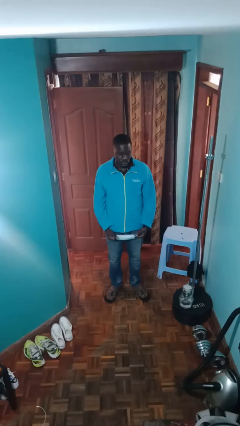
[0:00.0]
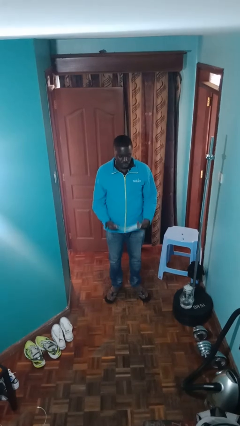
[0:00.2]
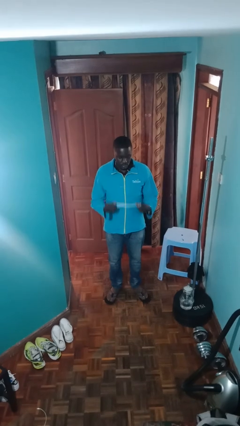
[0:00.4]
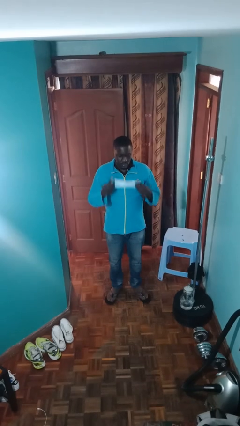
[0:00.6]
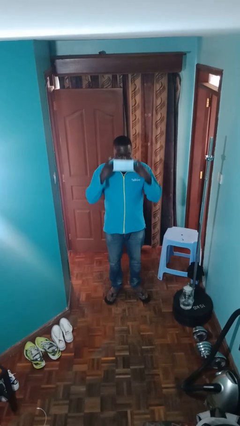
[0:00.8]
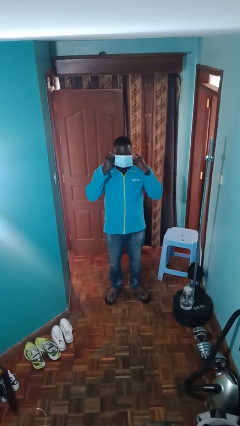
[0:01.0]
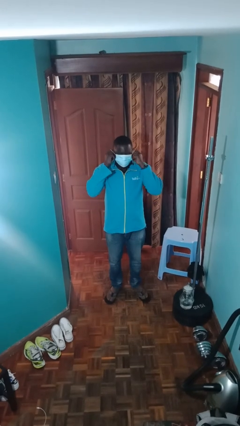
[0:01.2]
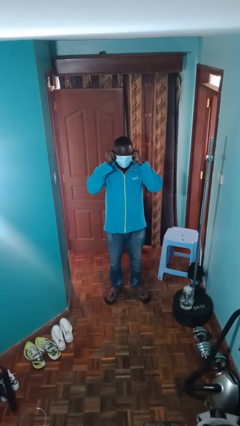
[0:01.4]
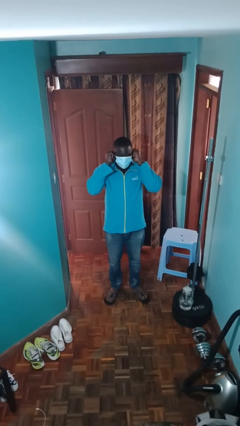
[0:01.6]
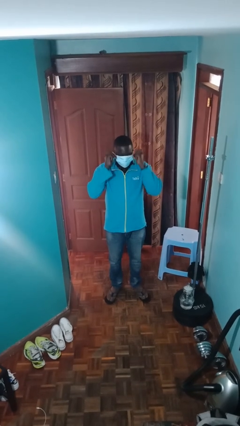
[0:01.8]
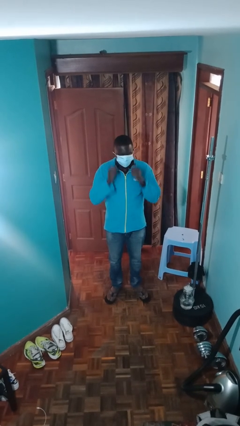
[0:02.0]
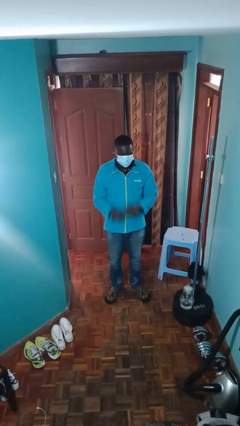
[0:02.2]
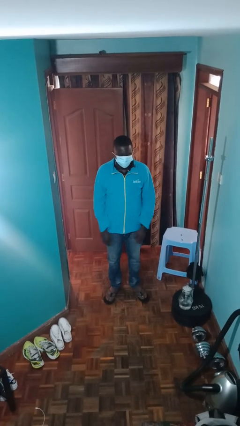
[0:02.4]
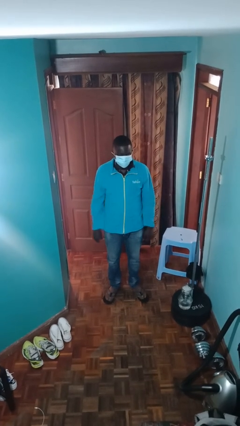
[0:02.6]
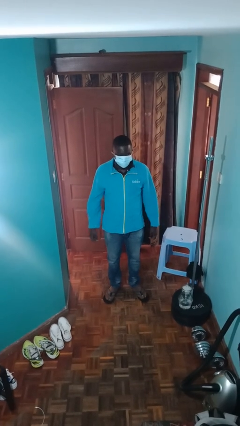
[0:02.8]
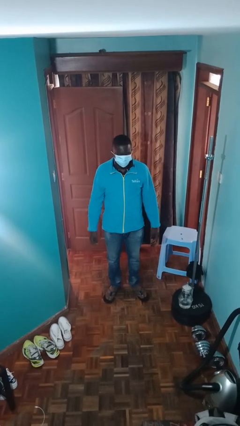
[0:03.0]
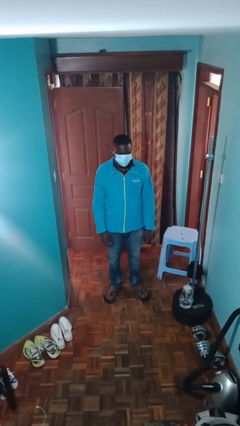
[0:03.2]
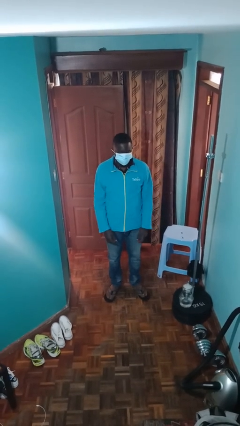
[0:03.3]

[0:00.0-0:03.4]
person puts on facemask

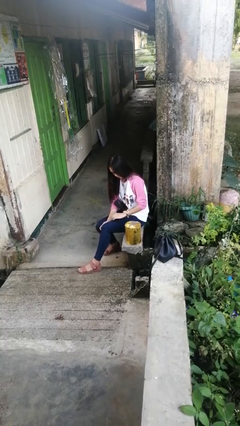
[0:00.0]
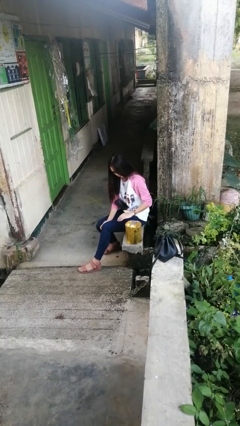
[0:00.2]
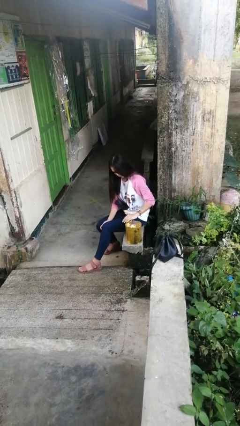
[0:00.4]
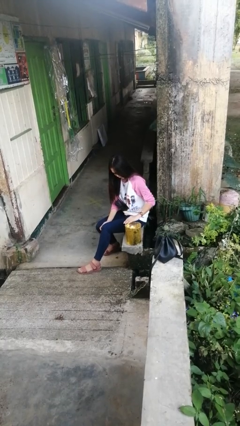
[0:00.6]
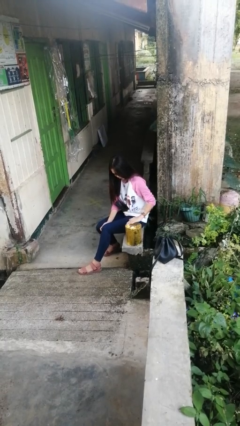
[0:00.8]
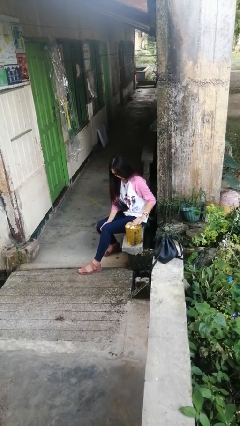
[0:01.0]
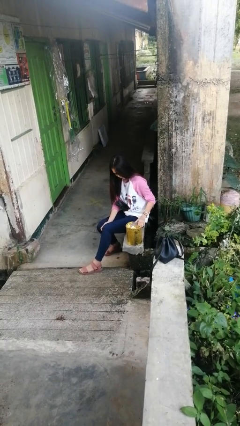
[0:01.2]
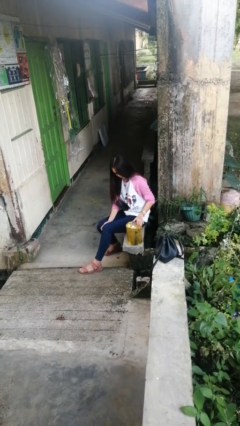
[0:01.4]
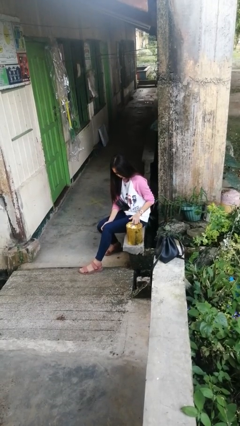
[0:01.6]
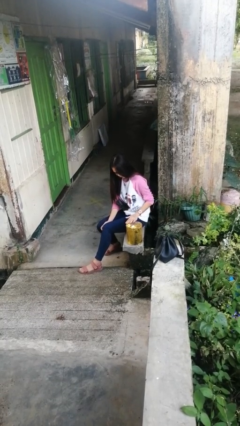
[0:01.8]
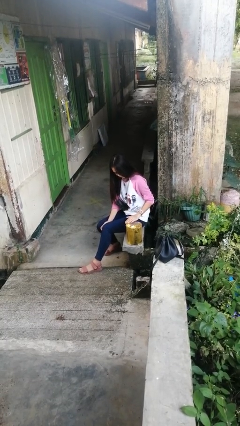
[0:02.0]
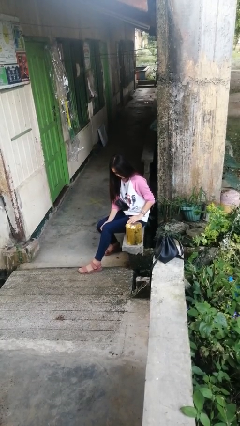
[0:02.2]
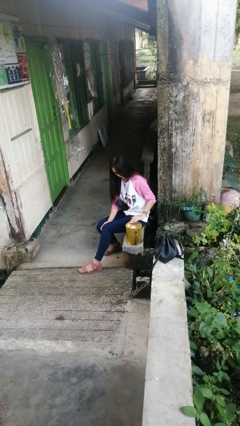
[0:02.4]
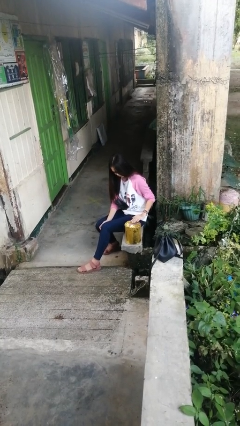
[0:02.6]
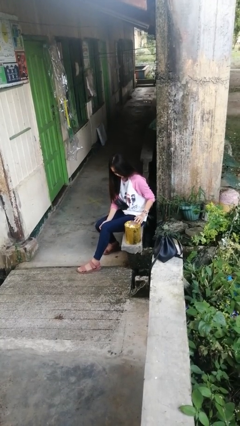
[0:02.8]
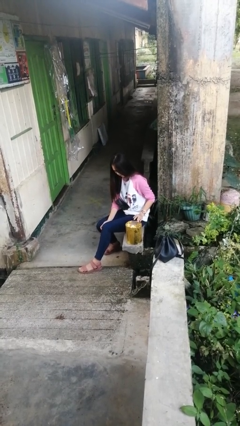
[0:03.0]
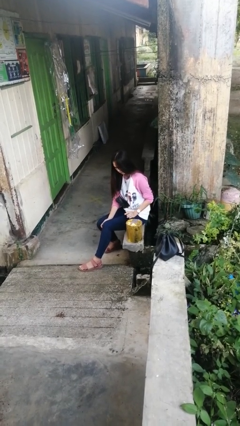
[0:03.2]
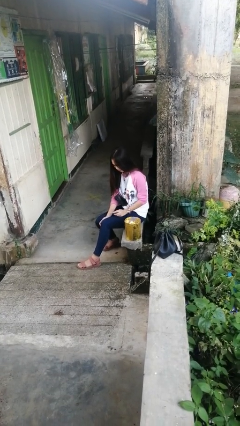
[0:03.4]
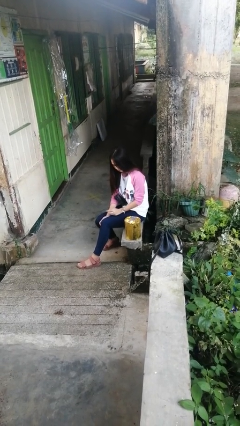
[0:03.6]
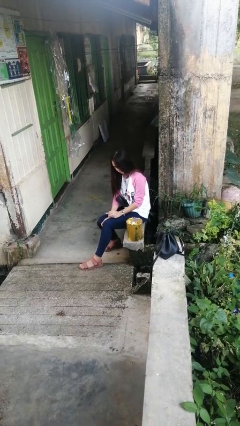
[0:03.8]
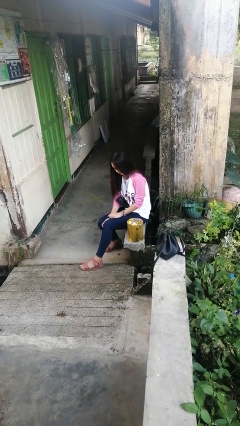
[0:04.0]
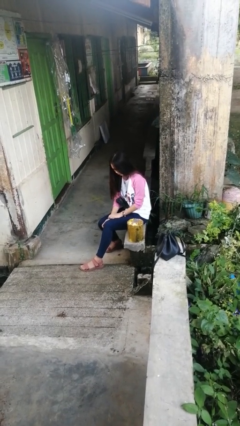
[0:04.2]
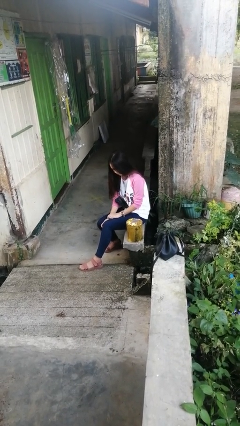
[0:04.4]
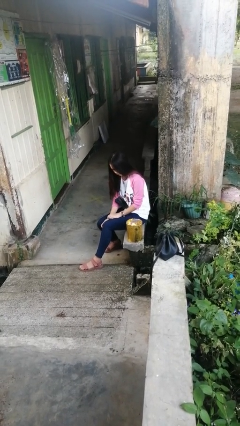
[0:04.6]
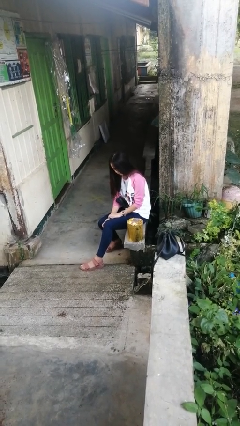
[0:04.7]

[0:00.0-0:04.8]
person waves hand over object

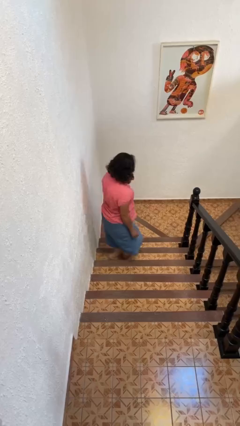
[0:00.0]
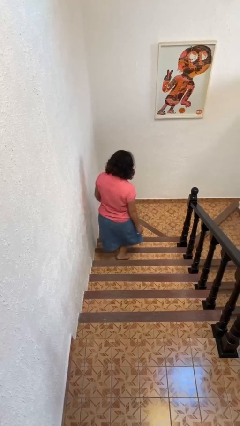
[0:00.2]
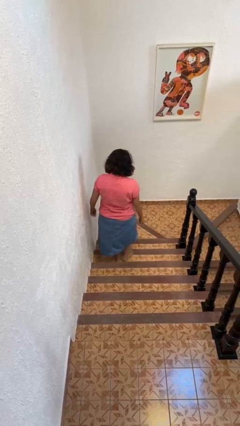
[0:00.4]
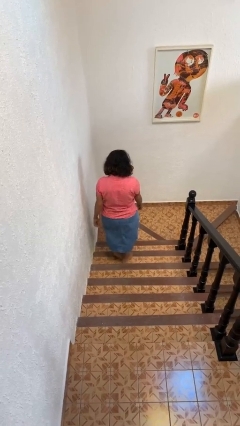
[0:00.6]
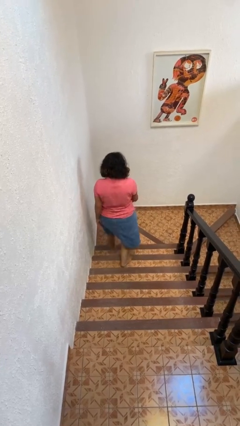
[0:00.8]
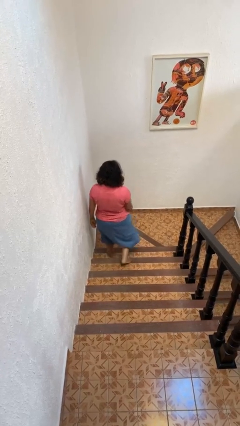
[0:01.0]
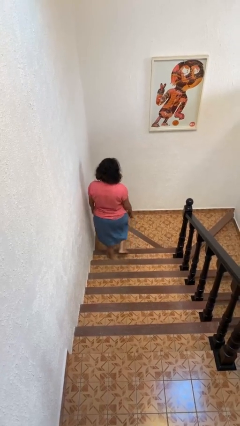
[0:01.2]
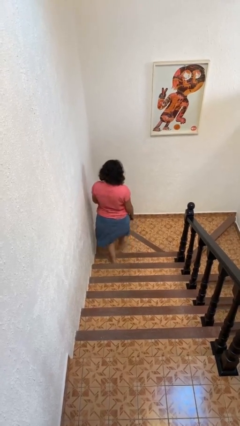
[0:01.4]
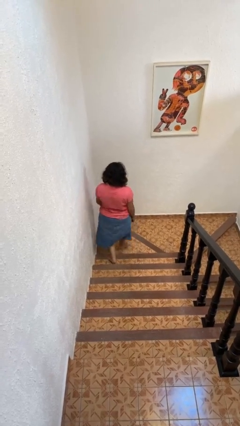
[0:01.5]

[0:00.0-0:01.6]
person climbs down stairs

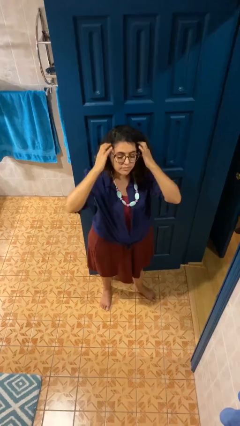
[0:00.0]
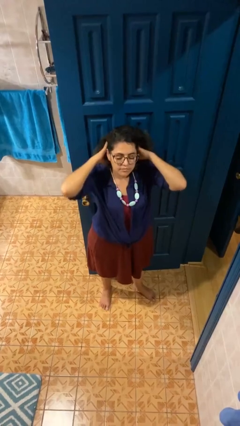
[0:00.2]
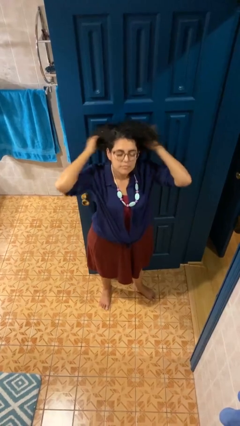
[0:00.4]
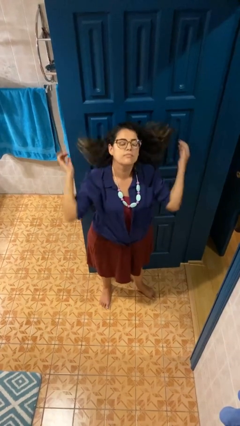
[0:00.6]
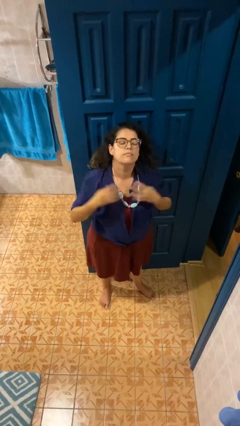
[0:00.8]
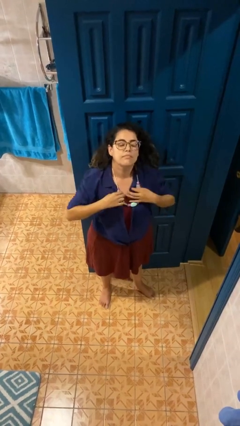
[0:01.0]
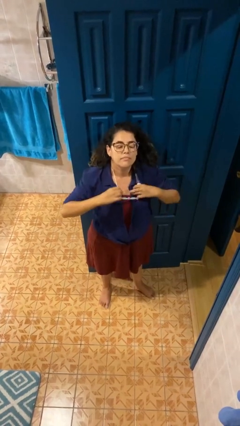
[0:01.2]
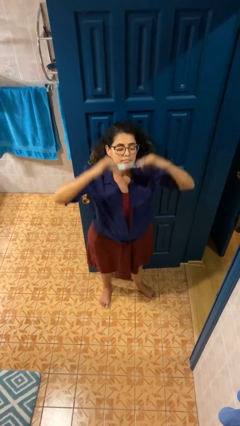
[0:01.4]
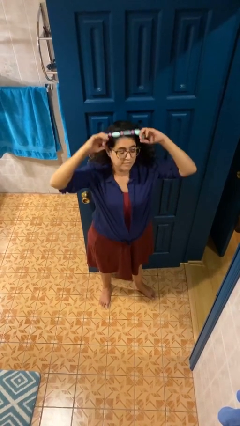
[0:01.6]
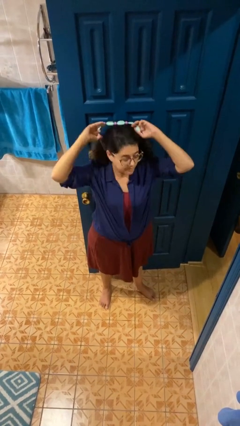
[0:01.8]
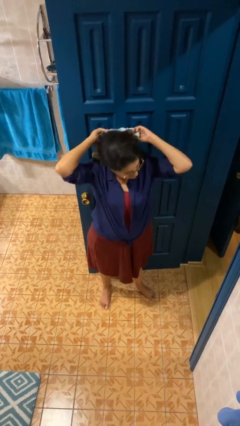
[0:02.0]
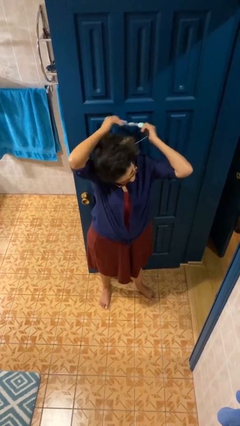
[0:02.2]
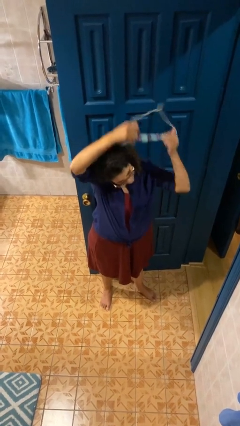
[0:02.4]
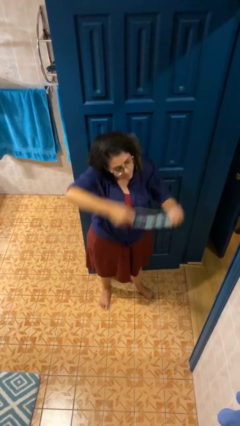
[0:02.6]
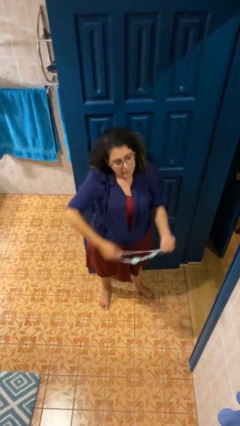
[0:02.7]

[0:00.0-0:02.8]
person takes off necklace

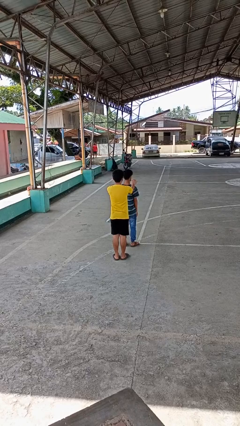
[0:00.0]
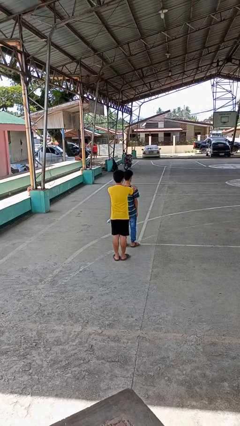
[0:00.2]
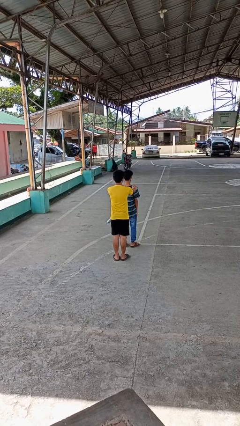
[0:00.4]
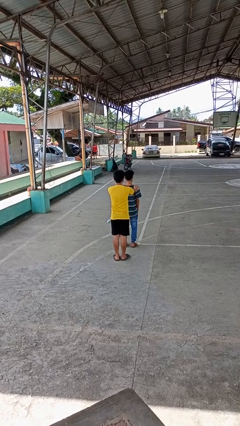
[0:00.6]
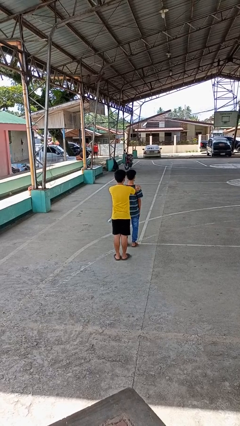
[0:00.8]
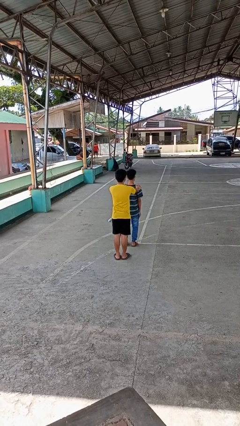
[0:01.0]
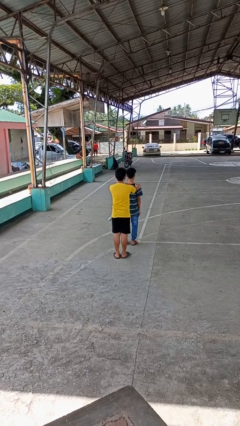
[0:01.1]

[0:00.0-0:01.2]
person grabs person by shoulder

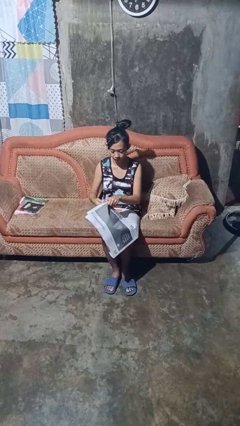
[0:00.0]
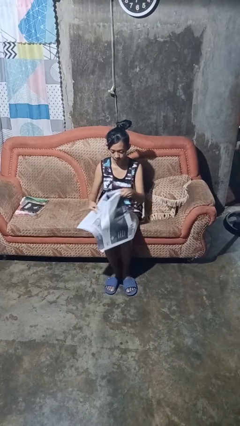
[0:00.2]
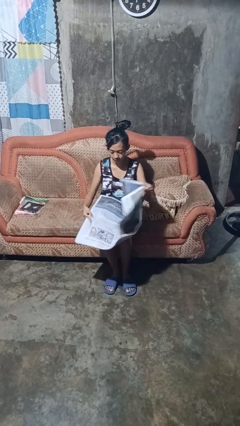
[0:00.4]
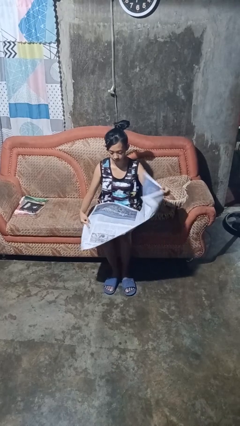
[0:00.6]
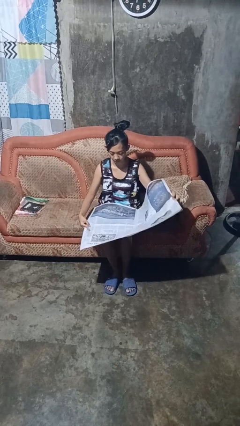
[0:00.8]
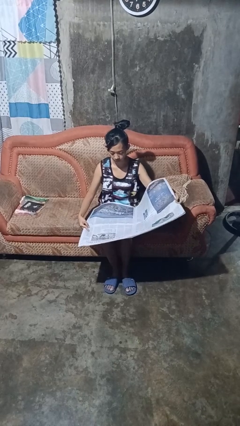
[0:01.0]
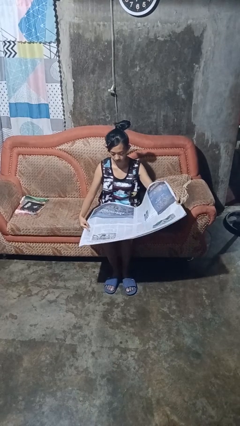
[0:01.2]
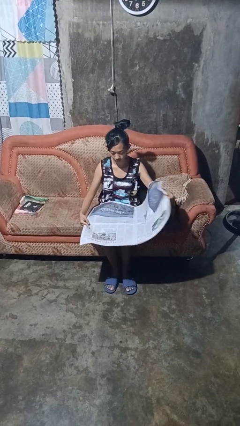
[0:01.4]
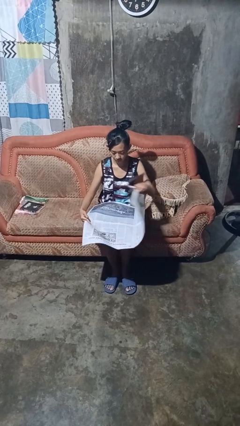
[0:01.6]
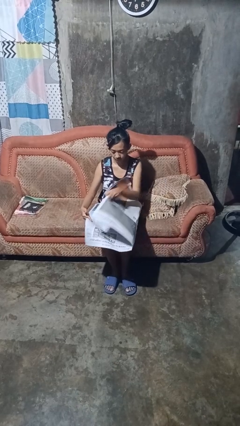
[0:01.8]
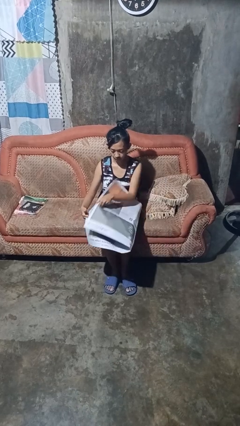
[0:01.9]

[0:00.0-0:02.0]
person reads newspaper

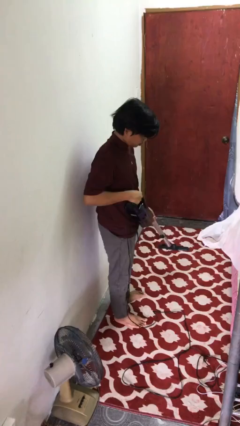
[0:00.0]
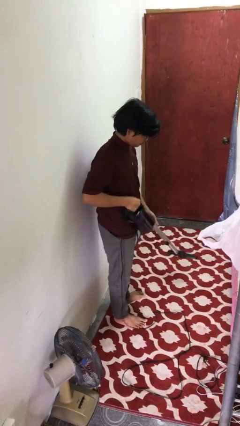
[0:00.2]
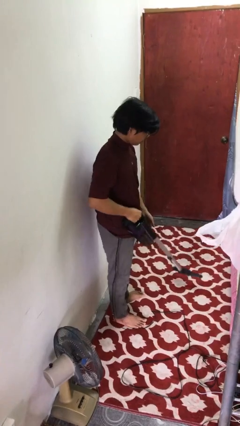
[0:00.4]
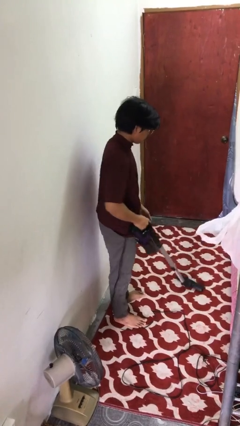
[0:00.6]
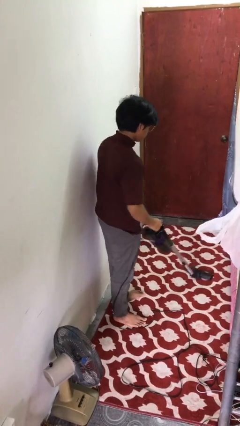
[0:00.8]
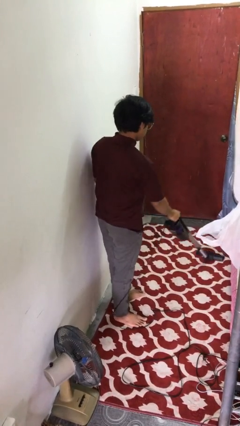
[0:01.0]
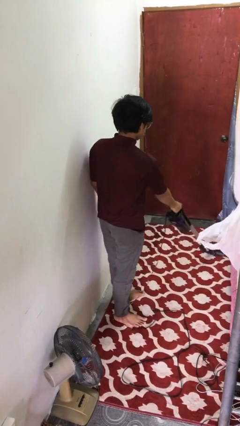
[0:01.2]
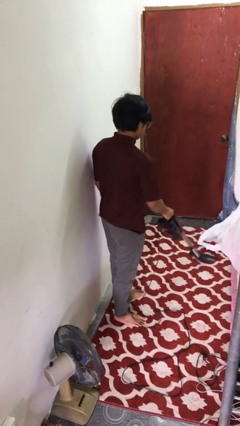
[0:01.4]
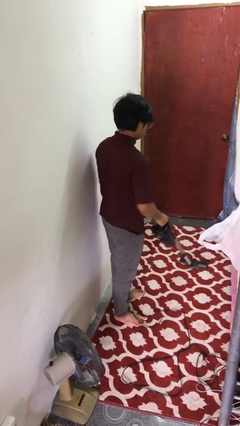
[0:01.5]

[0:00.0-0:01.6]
person vacuums carpet
